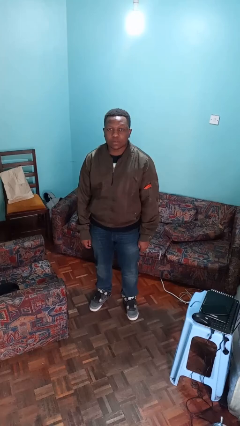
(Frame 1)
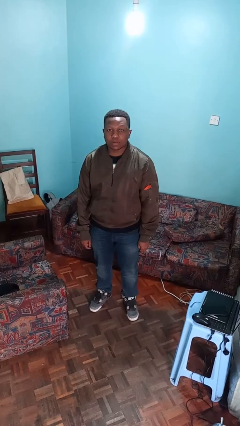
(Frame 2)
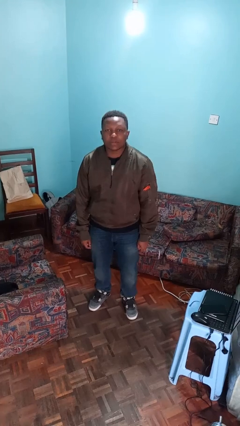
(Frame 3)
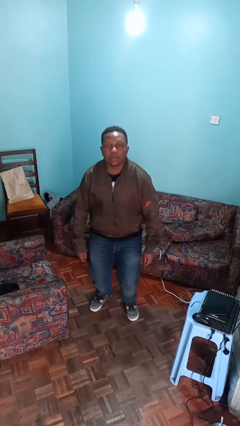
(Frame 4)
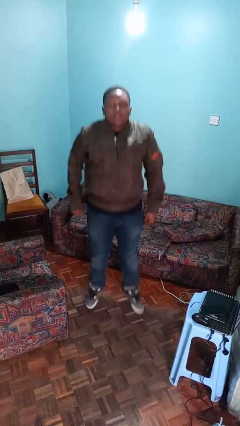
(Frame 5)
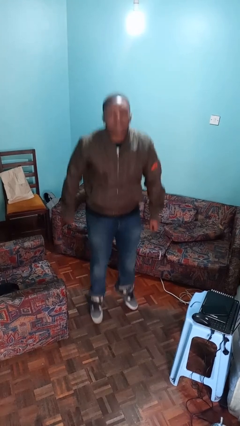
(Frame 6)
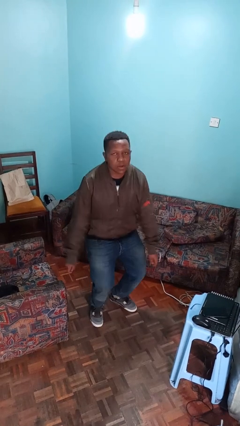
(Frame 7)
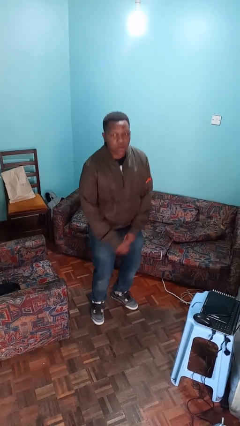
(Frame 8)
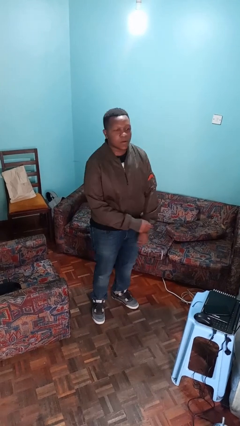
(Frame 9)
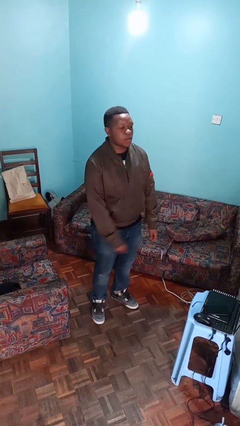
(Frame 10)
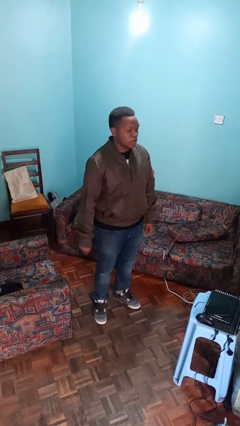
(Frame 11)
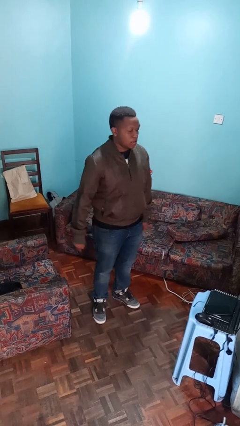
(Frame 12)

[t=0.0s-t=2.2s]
person jumps

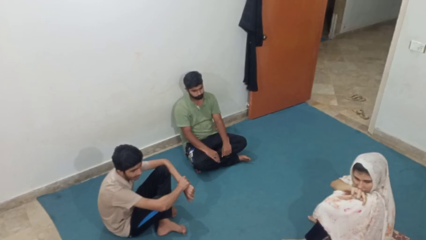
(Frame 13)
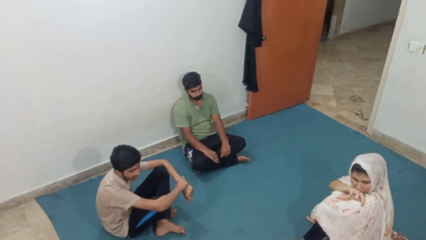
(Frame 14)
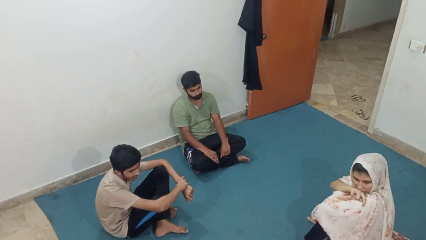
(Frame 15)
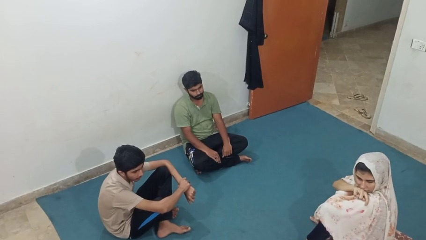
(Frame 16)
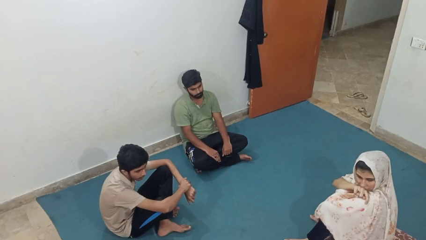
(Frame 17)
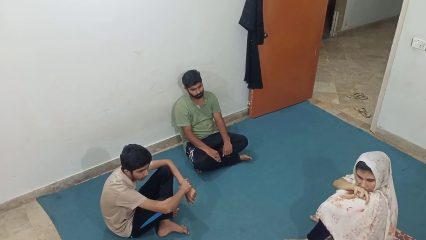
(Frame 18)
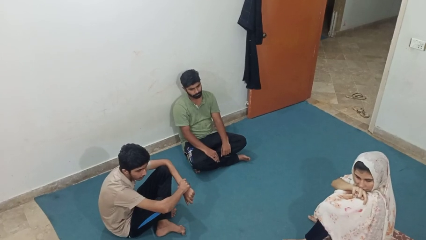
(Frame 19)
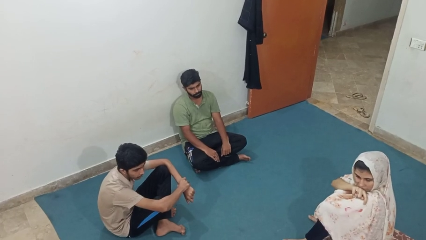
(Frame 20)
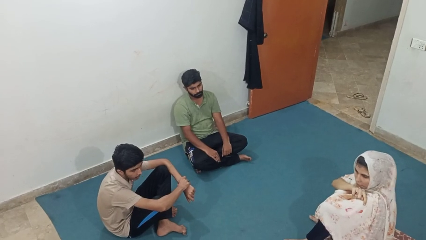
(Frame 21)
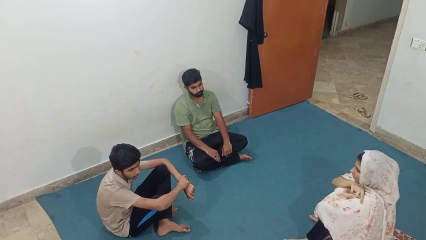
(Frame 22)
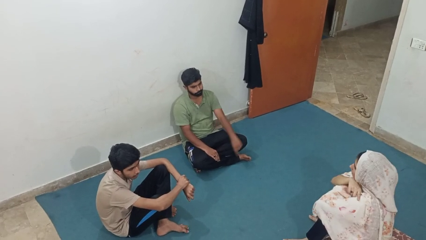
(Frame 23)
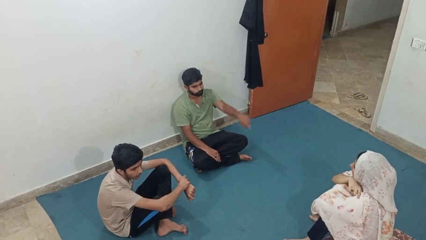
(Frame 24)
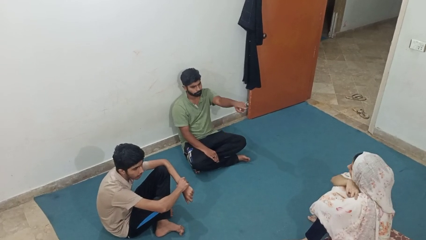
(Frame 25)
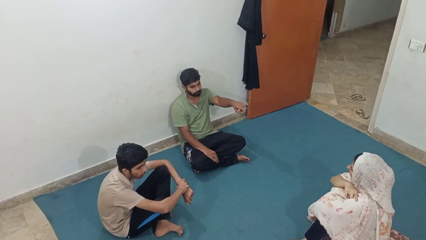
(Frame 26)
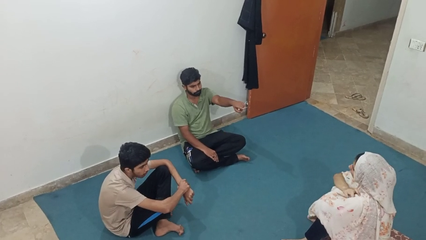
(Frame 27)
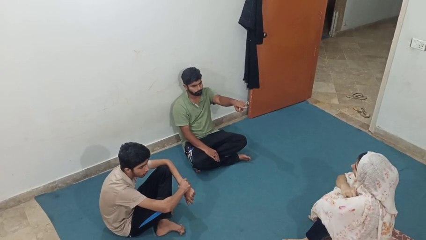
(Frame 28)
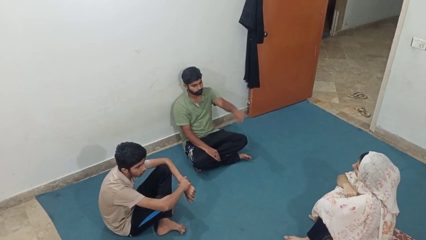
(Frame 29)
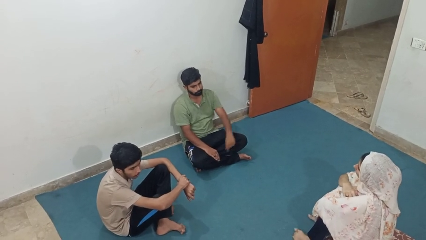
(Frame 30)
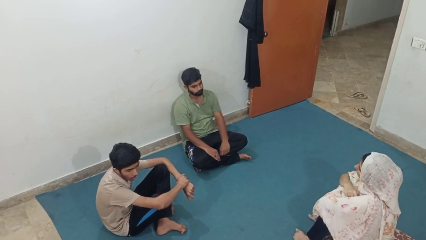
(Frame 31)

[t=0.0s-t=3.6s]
person points at person

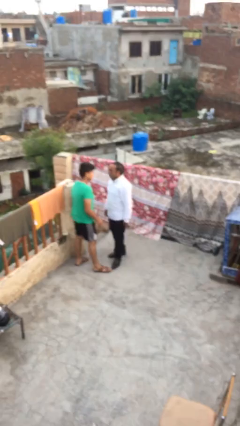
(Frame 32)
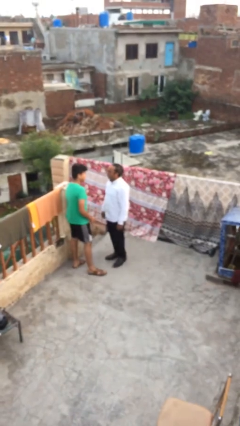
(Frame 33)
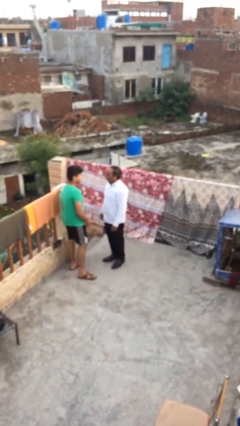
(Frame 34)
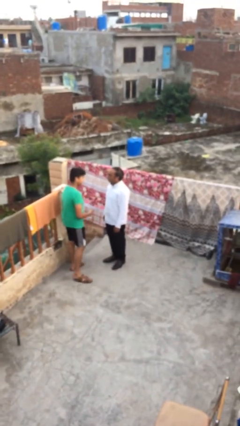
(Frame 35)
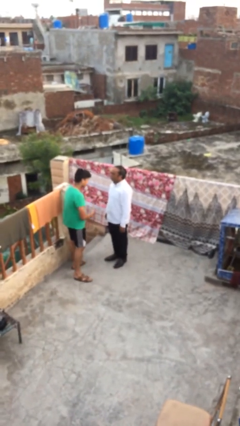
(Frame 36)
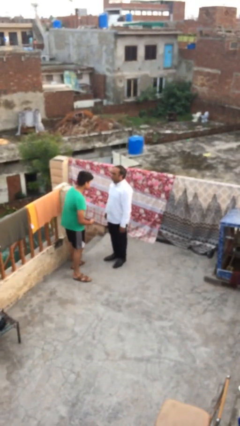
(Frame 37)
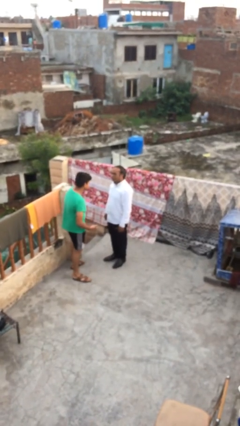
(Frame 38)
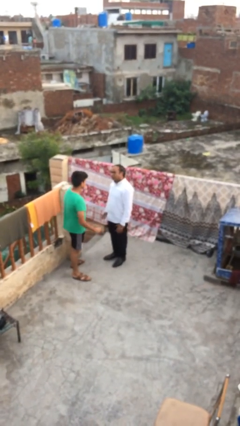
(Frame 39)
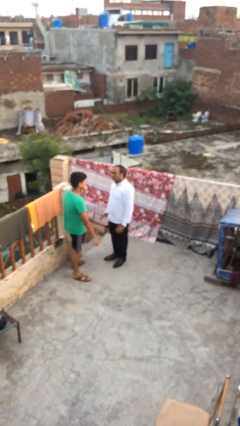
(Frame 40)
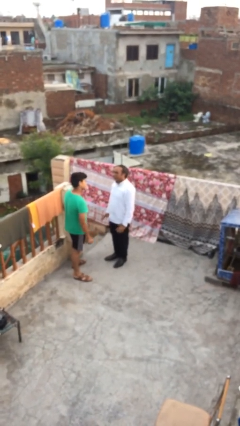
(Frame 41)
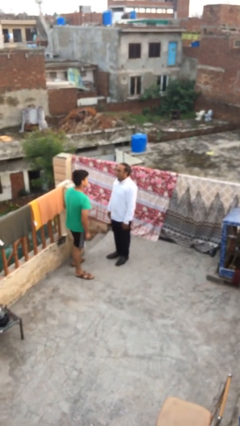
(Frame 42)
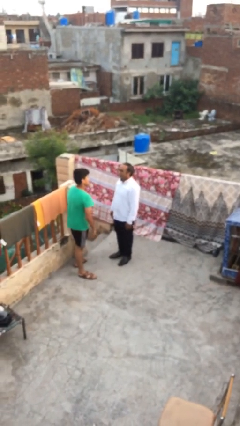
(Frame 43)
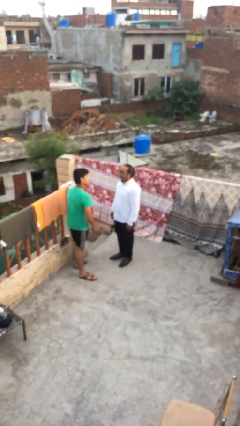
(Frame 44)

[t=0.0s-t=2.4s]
person talks to person

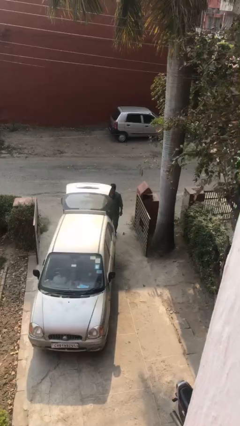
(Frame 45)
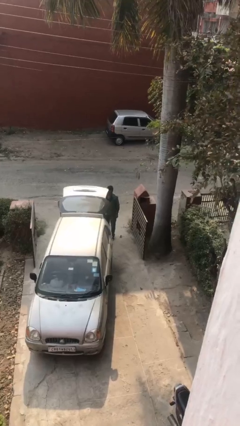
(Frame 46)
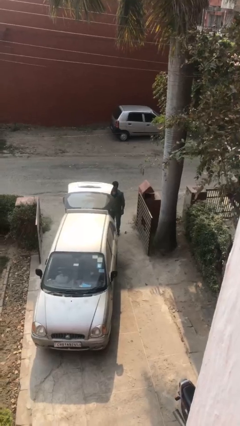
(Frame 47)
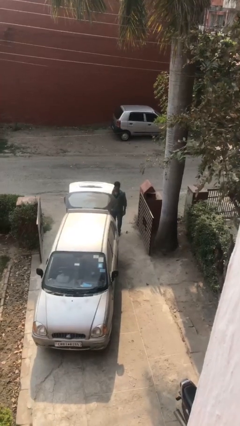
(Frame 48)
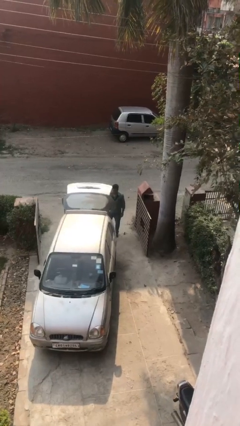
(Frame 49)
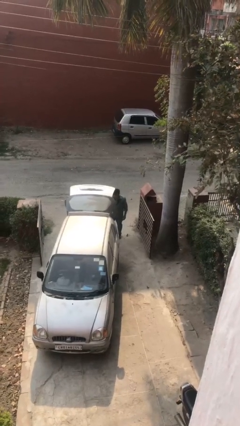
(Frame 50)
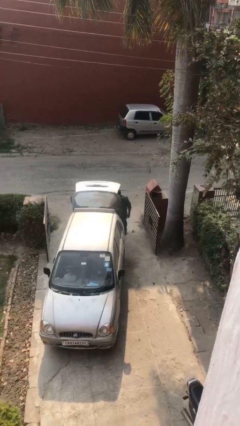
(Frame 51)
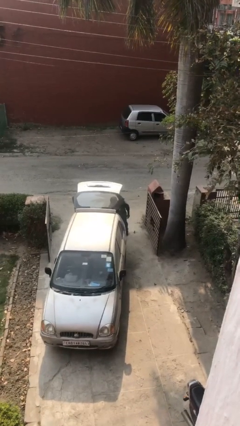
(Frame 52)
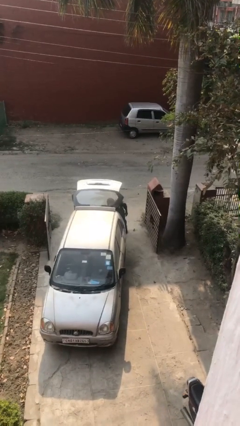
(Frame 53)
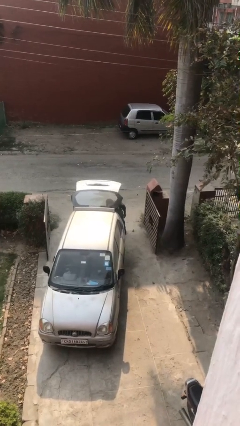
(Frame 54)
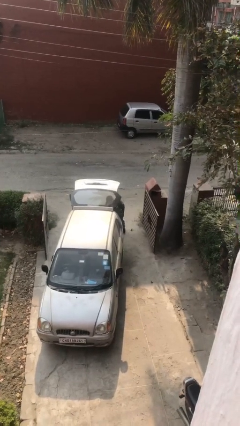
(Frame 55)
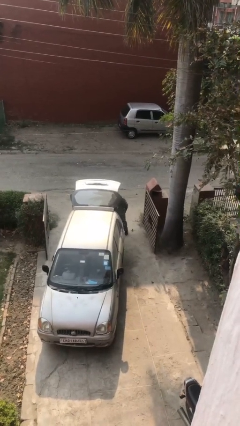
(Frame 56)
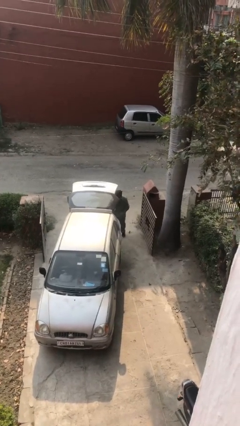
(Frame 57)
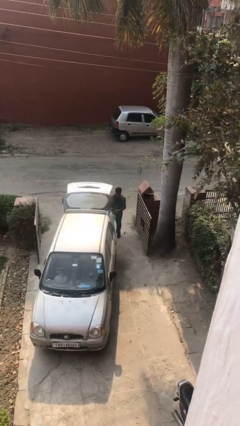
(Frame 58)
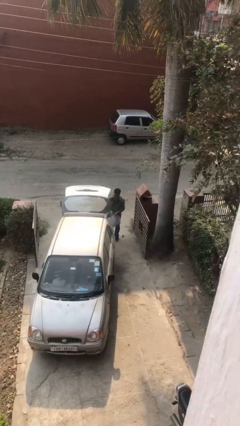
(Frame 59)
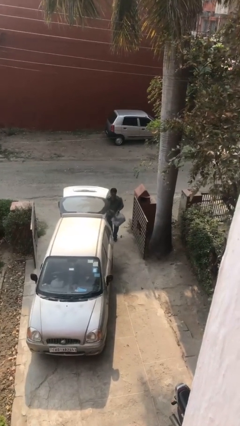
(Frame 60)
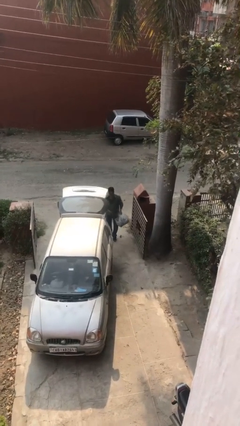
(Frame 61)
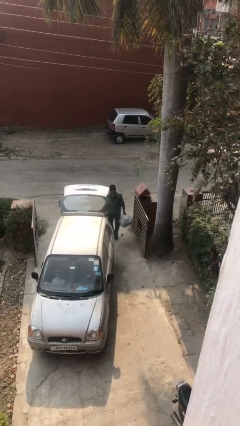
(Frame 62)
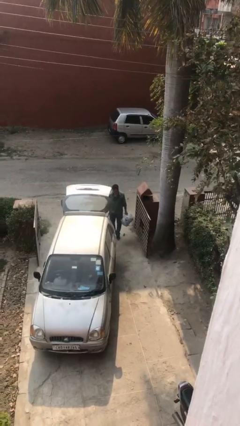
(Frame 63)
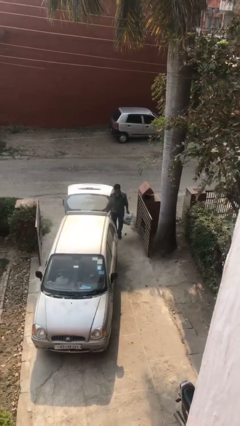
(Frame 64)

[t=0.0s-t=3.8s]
person unloads car

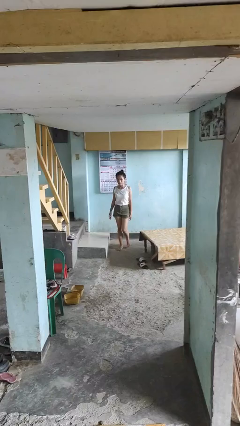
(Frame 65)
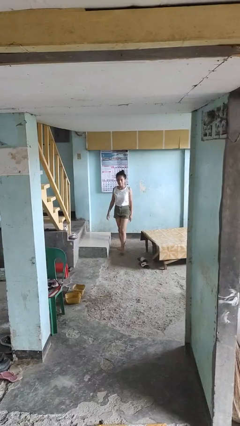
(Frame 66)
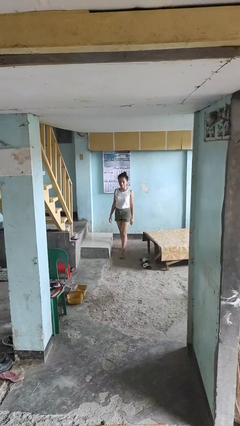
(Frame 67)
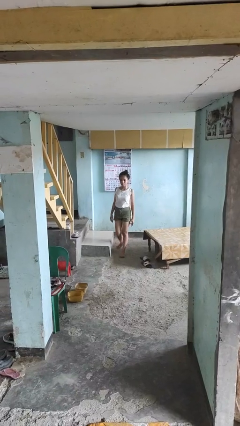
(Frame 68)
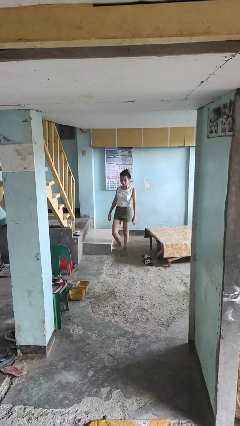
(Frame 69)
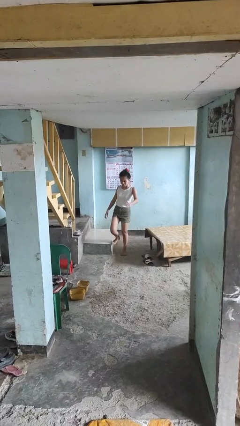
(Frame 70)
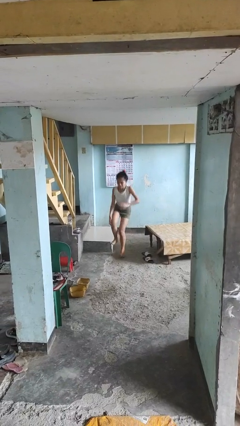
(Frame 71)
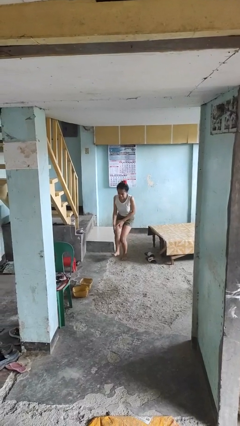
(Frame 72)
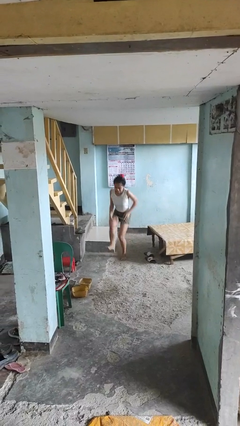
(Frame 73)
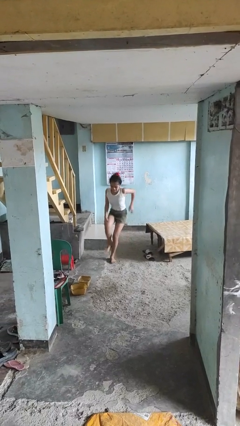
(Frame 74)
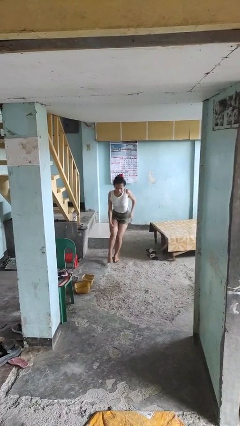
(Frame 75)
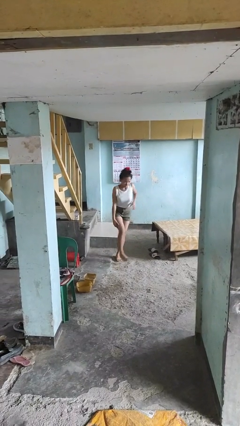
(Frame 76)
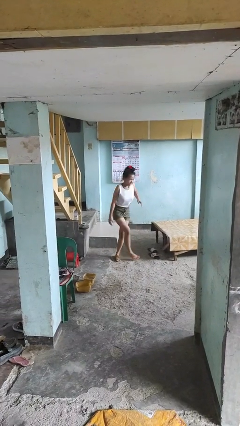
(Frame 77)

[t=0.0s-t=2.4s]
person stubs toe

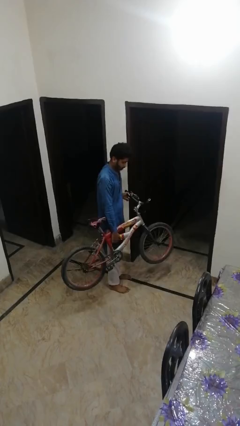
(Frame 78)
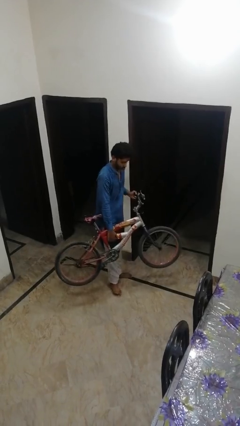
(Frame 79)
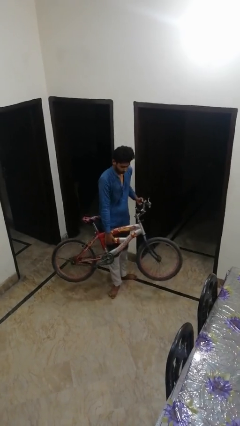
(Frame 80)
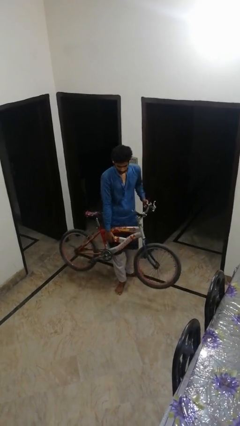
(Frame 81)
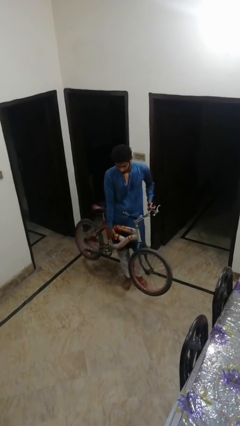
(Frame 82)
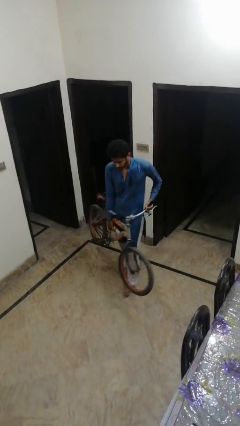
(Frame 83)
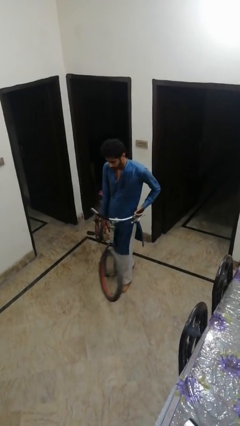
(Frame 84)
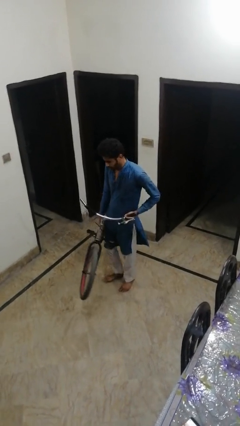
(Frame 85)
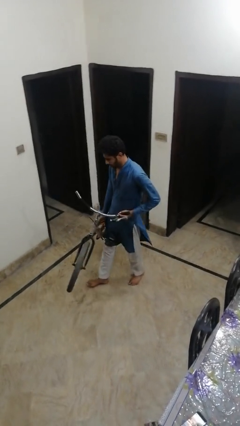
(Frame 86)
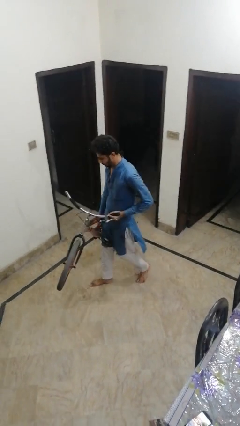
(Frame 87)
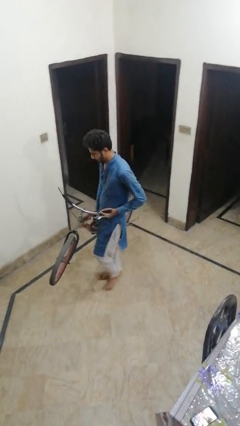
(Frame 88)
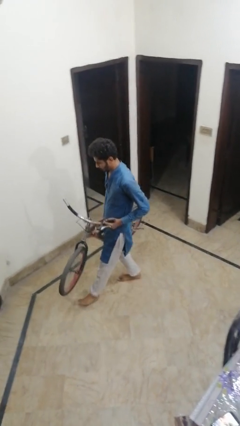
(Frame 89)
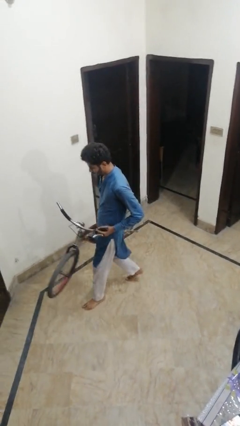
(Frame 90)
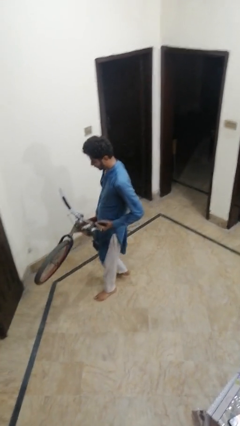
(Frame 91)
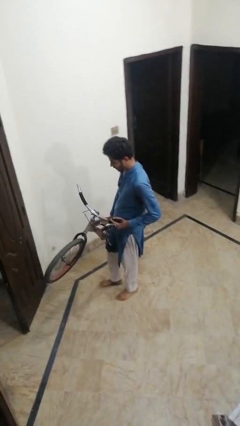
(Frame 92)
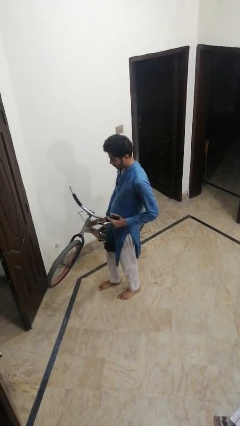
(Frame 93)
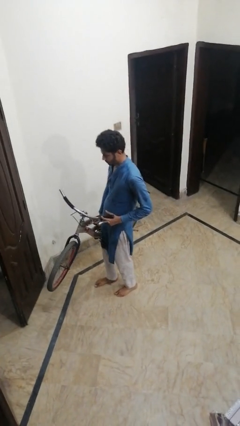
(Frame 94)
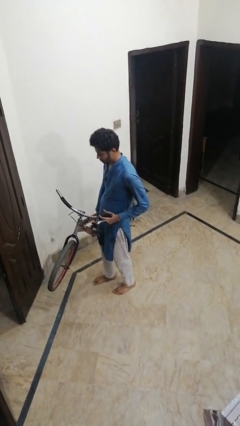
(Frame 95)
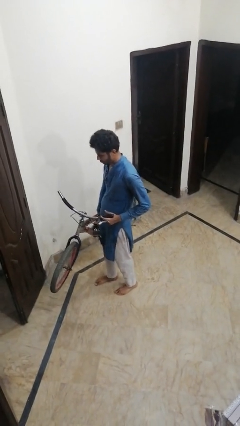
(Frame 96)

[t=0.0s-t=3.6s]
person carries bicycle
